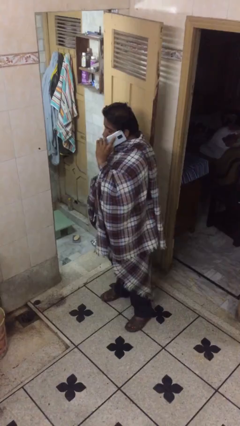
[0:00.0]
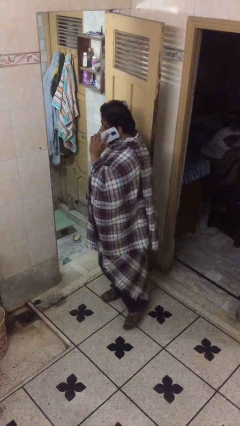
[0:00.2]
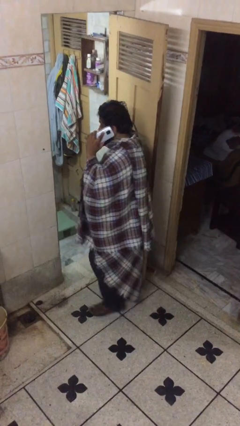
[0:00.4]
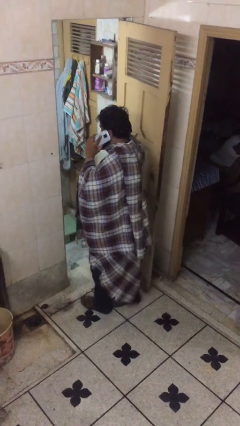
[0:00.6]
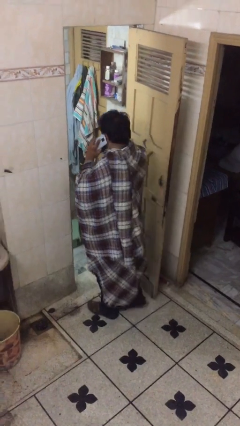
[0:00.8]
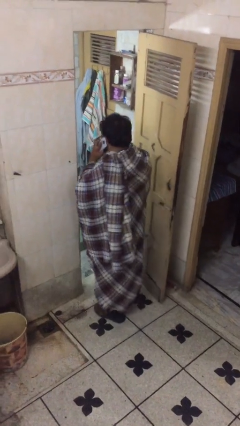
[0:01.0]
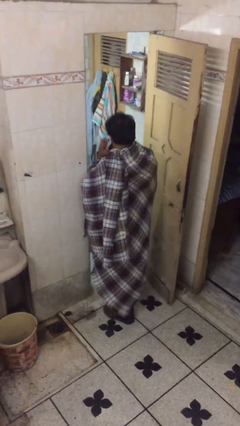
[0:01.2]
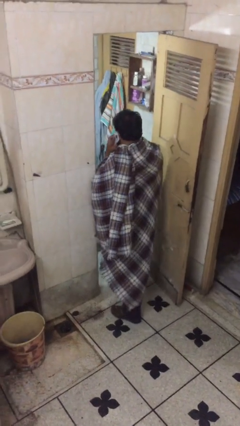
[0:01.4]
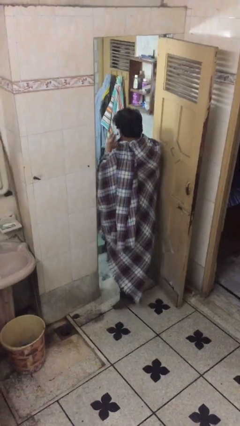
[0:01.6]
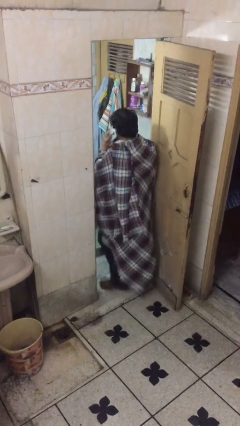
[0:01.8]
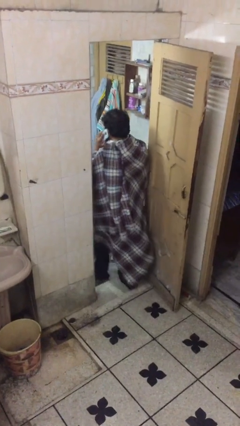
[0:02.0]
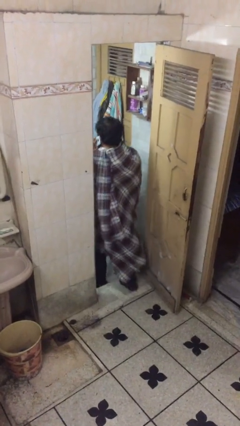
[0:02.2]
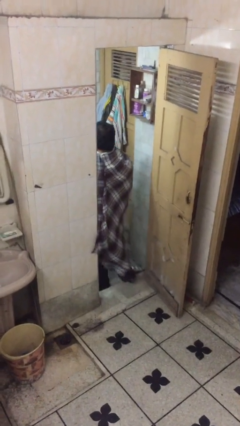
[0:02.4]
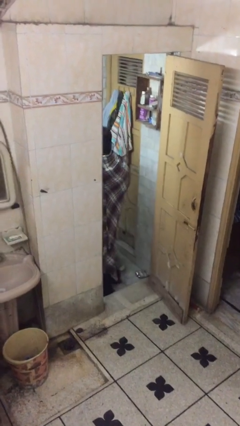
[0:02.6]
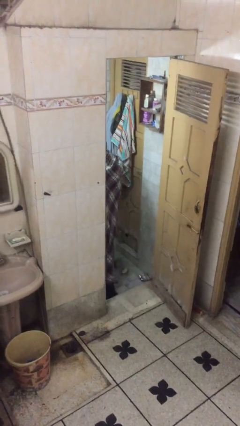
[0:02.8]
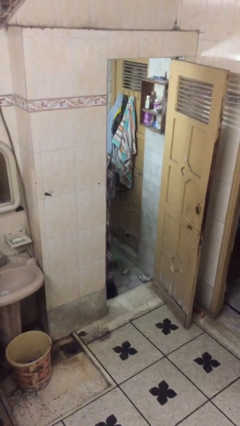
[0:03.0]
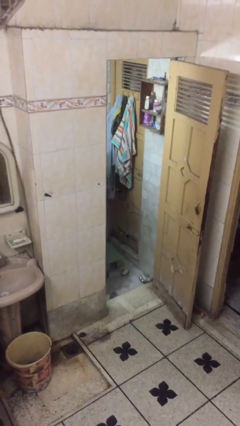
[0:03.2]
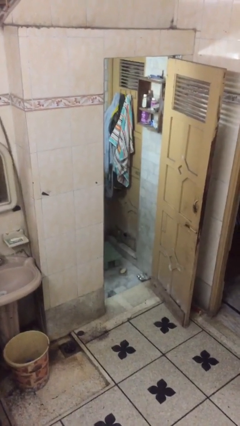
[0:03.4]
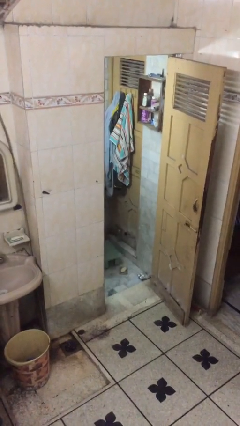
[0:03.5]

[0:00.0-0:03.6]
person exits scene through structure

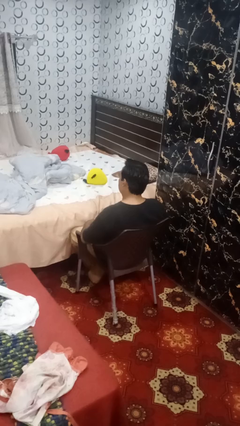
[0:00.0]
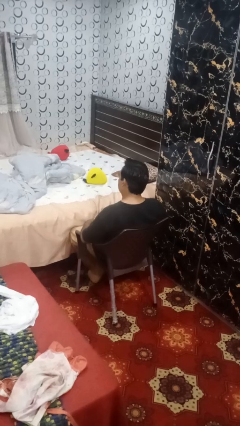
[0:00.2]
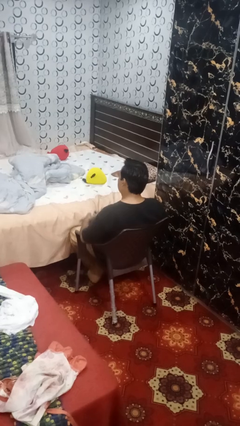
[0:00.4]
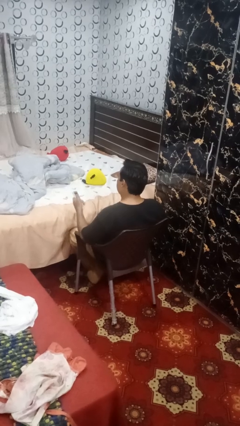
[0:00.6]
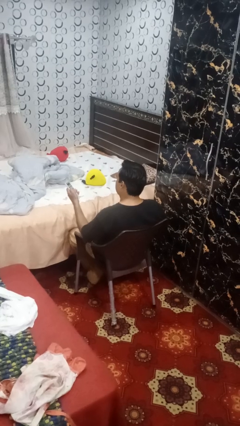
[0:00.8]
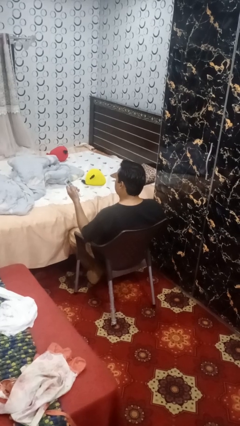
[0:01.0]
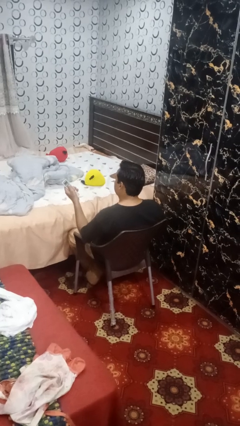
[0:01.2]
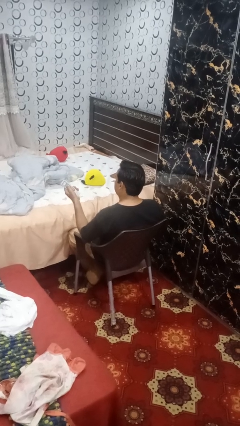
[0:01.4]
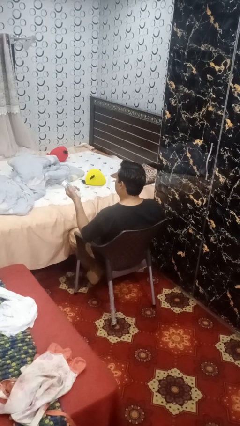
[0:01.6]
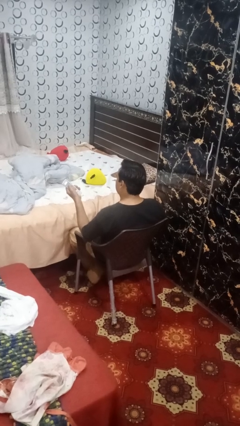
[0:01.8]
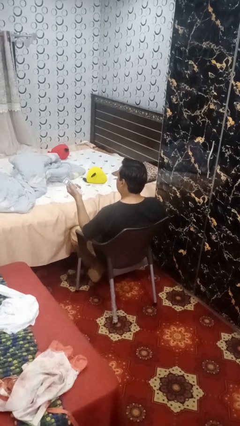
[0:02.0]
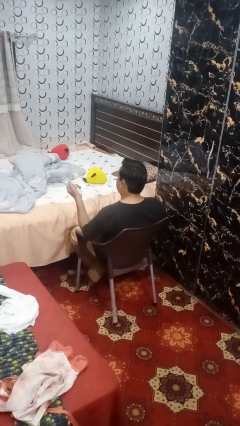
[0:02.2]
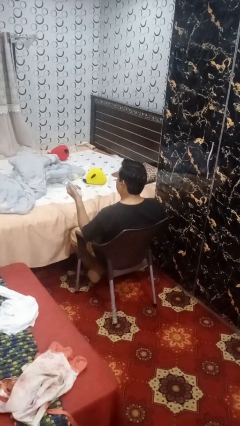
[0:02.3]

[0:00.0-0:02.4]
person uses television remote

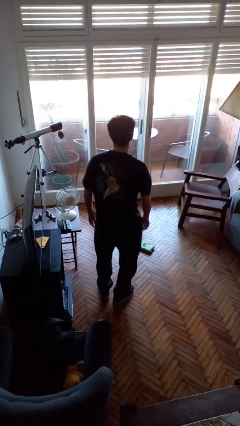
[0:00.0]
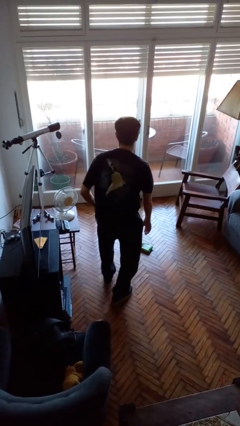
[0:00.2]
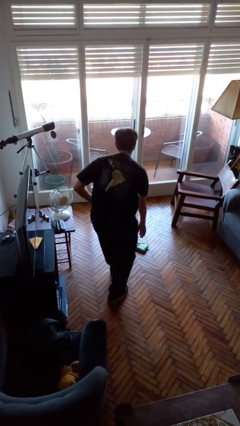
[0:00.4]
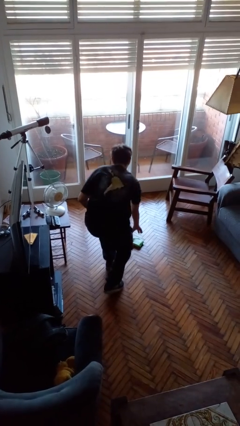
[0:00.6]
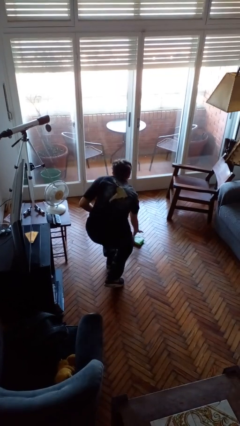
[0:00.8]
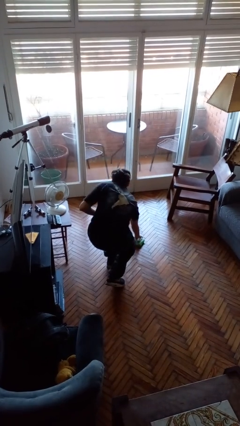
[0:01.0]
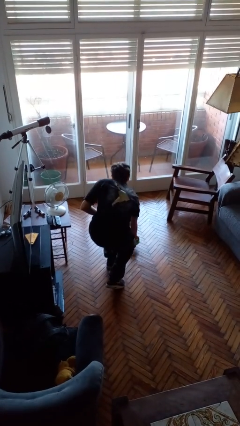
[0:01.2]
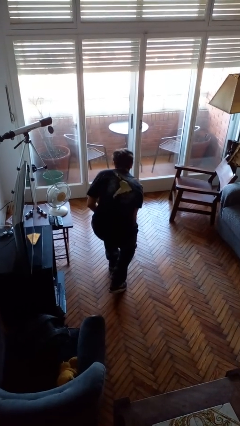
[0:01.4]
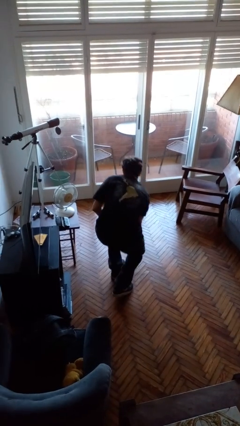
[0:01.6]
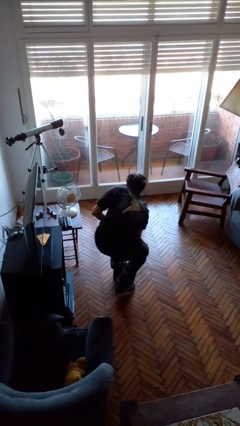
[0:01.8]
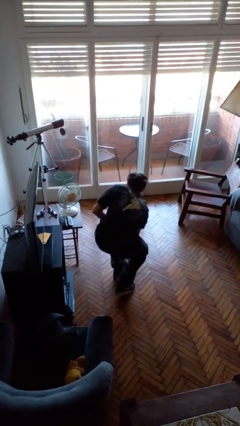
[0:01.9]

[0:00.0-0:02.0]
person picks up object from floor

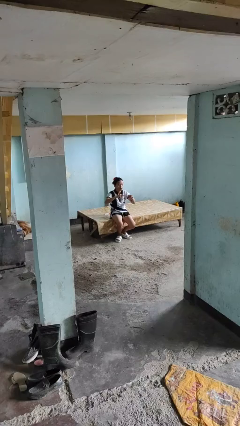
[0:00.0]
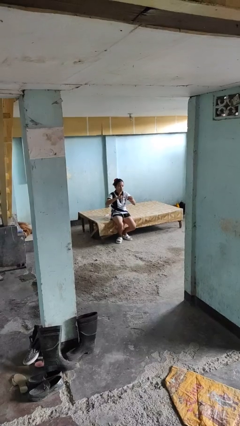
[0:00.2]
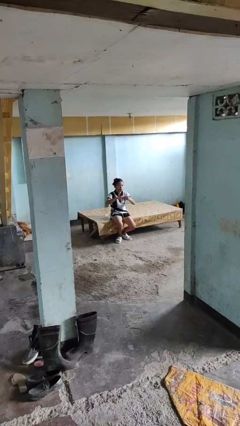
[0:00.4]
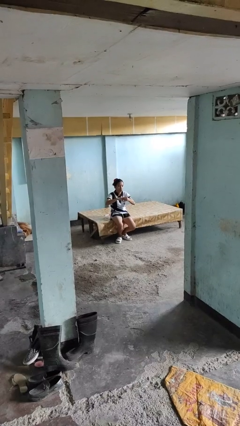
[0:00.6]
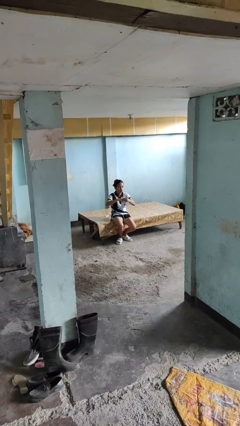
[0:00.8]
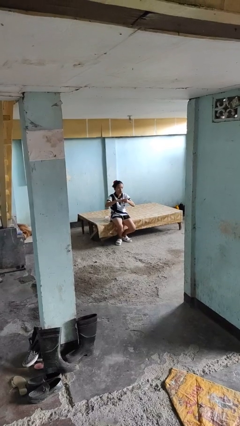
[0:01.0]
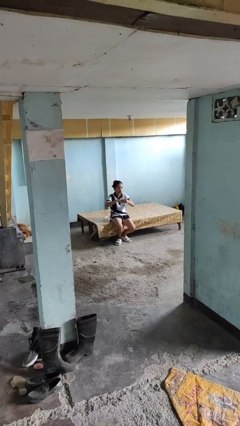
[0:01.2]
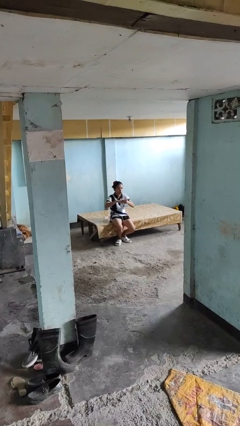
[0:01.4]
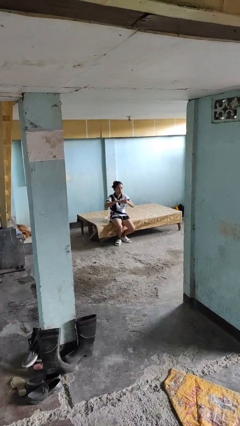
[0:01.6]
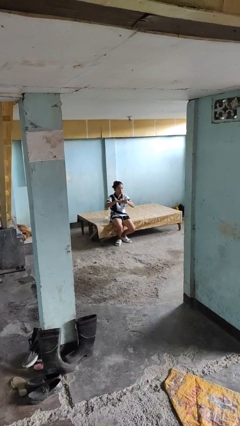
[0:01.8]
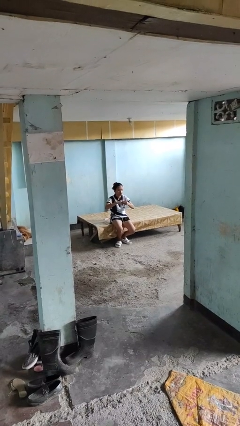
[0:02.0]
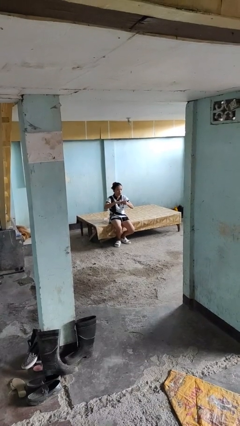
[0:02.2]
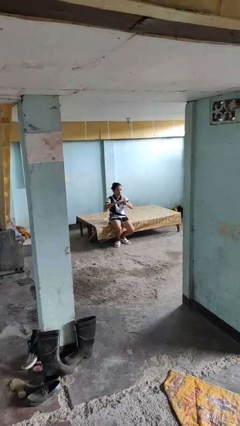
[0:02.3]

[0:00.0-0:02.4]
person puts on ring

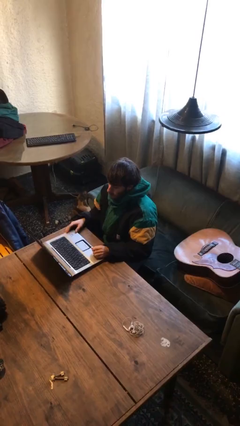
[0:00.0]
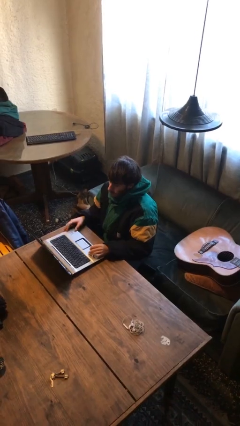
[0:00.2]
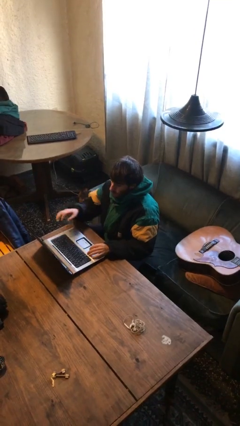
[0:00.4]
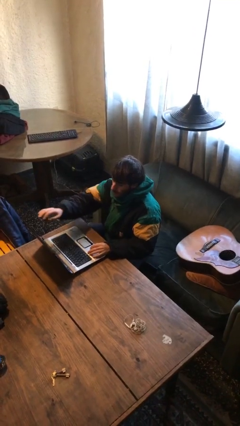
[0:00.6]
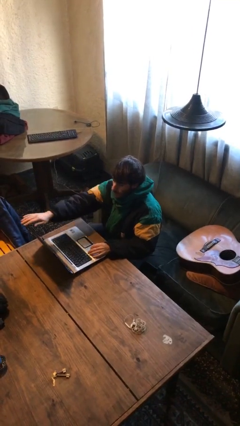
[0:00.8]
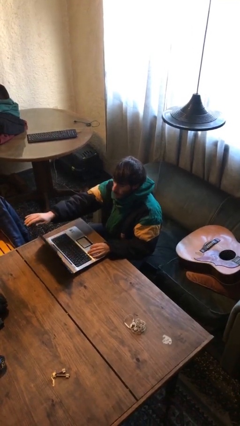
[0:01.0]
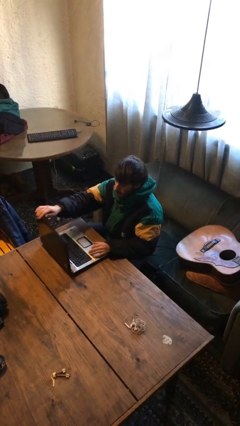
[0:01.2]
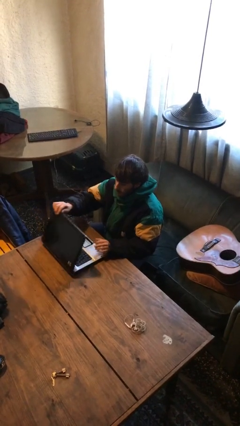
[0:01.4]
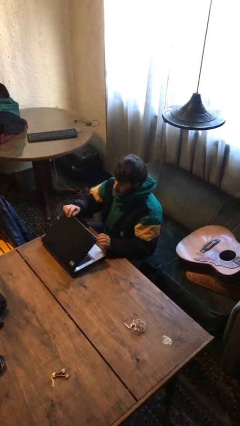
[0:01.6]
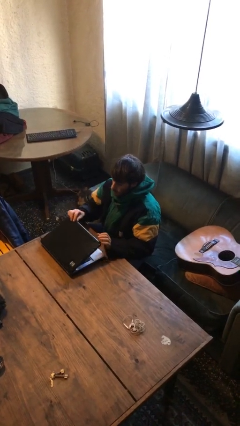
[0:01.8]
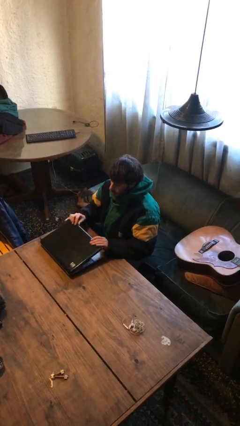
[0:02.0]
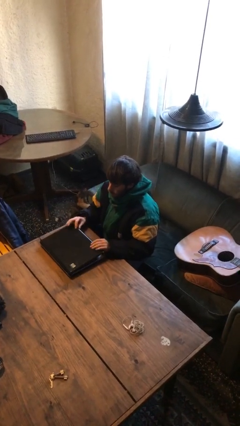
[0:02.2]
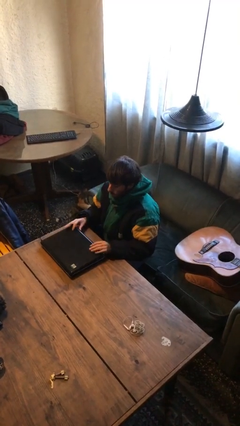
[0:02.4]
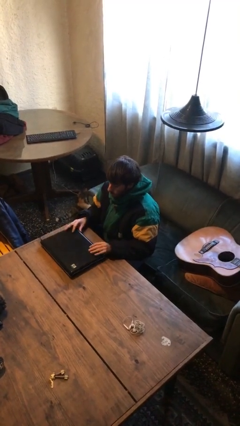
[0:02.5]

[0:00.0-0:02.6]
person closes laptop

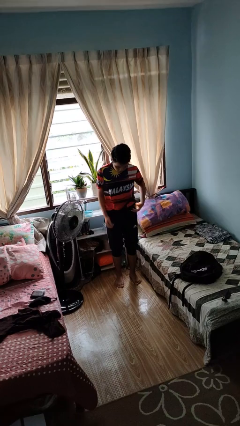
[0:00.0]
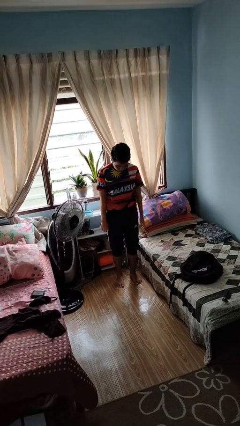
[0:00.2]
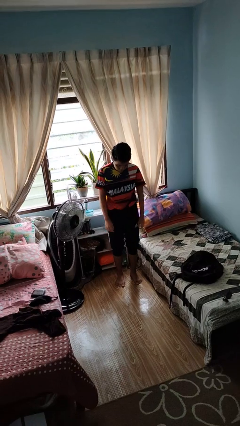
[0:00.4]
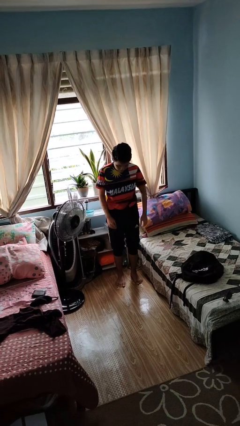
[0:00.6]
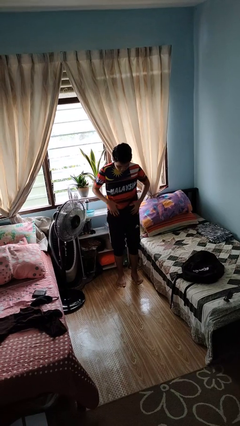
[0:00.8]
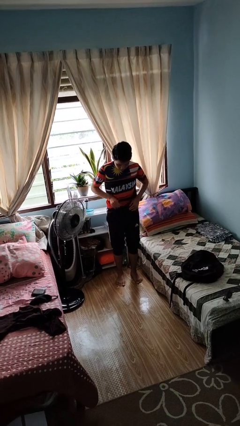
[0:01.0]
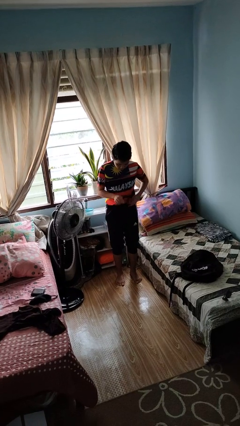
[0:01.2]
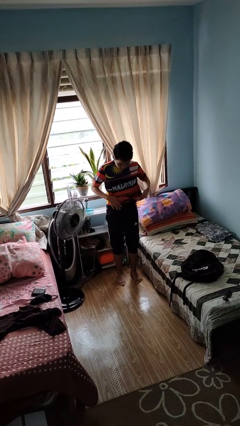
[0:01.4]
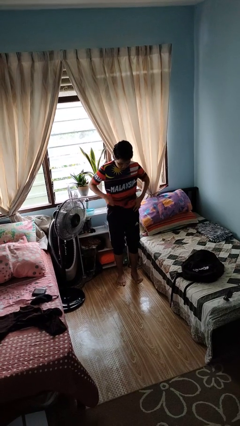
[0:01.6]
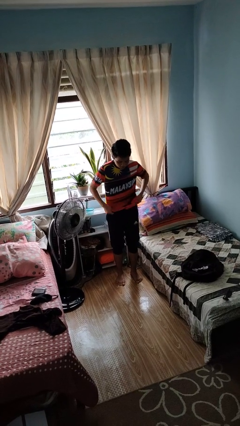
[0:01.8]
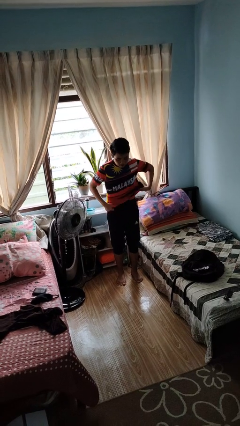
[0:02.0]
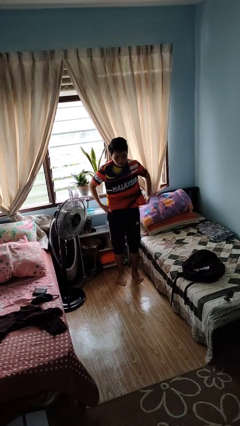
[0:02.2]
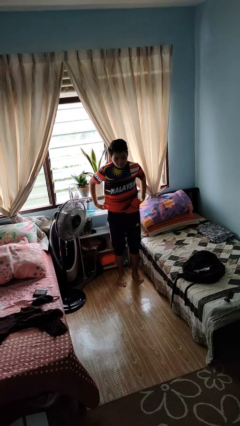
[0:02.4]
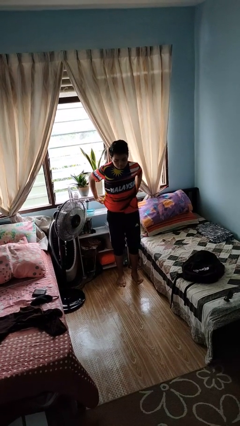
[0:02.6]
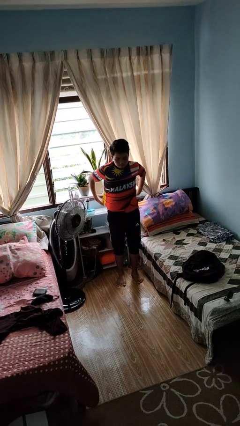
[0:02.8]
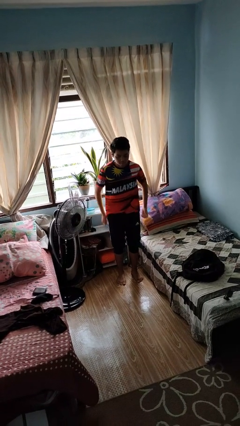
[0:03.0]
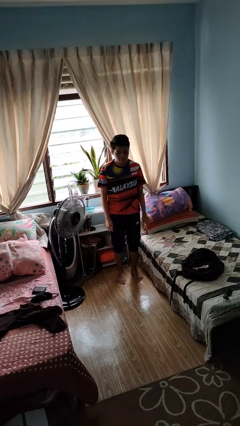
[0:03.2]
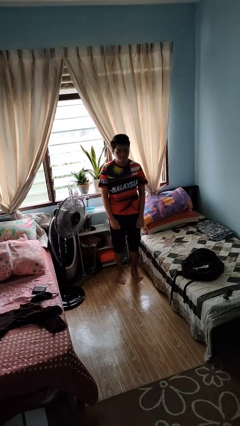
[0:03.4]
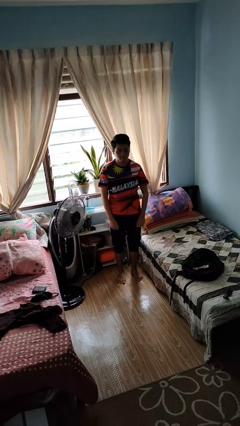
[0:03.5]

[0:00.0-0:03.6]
person untucks shirt

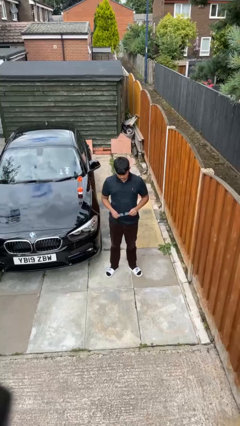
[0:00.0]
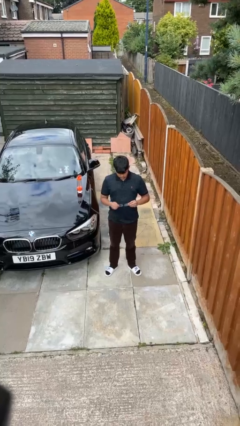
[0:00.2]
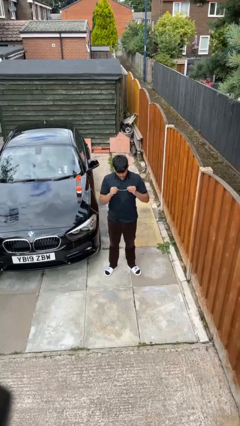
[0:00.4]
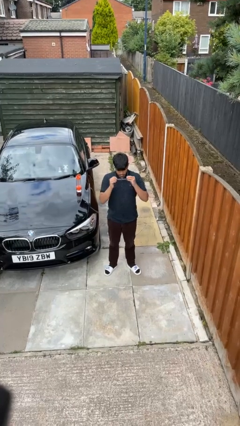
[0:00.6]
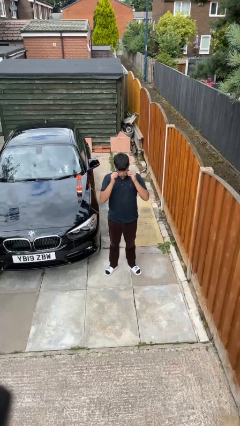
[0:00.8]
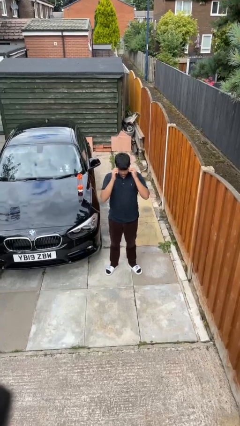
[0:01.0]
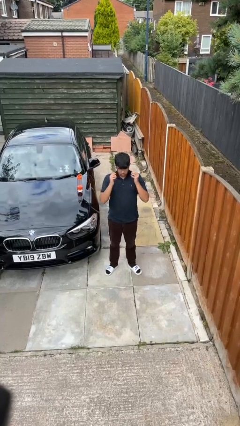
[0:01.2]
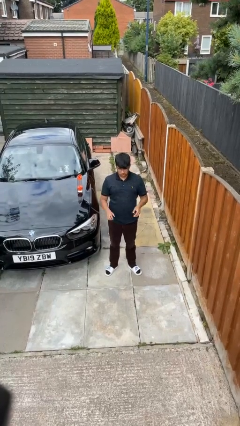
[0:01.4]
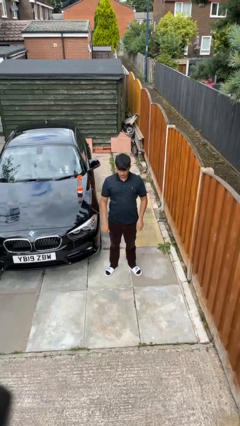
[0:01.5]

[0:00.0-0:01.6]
person puts on glasses
